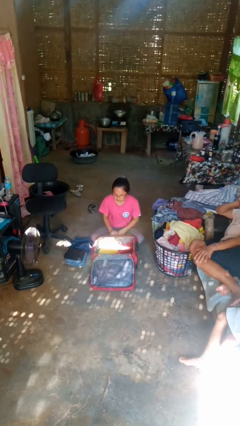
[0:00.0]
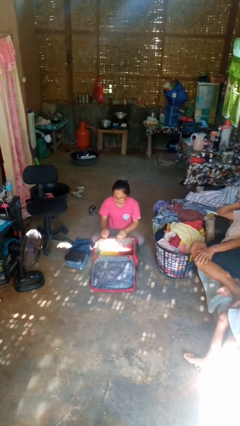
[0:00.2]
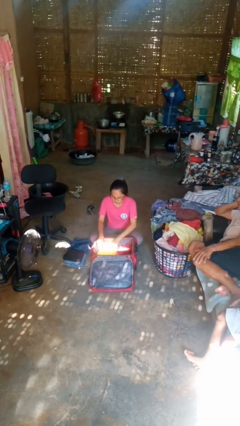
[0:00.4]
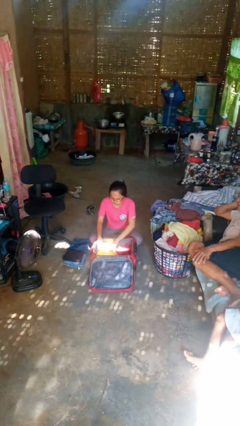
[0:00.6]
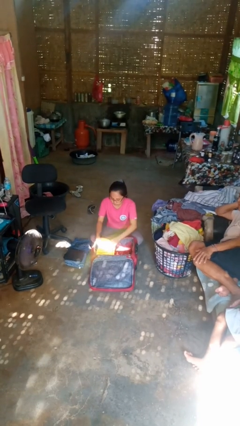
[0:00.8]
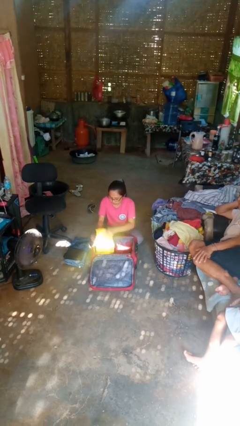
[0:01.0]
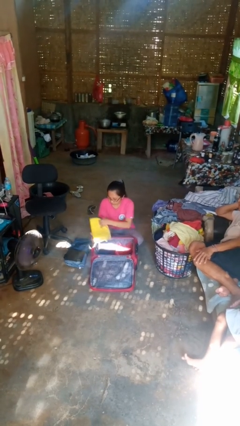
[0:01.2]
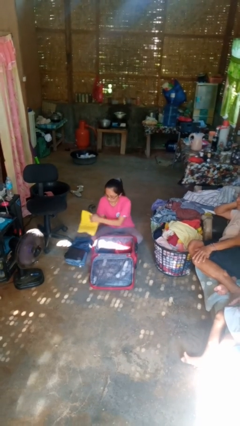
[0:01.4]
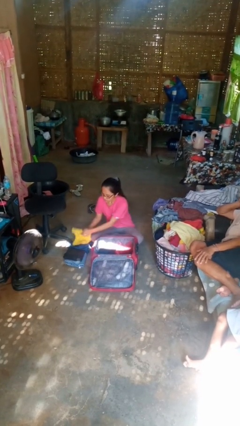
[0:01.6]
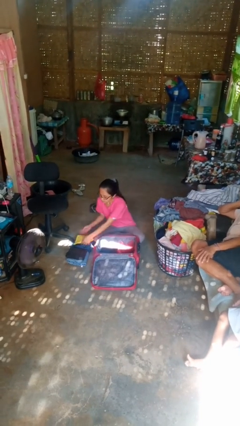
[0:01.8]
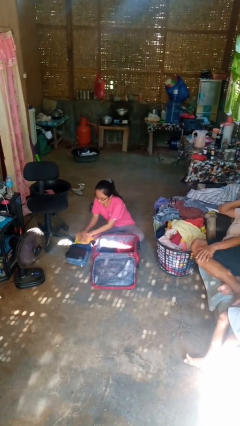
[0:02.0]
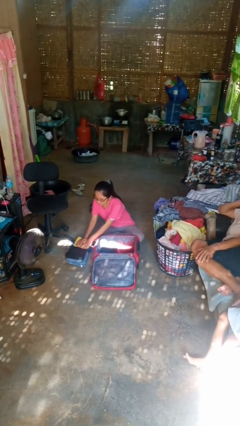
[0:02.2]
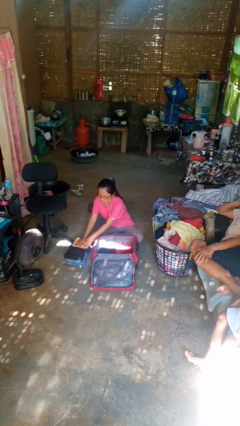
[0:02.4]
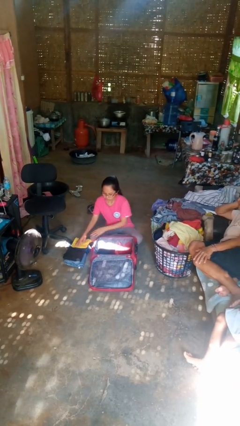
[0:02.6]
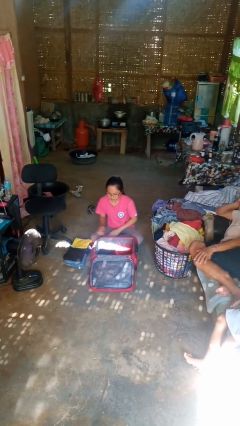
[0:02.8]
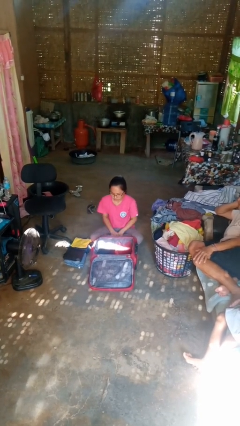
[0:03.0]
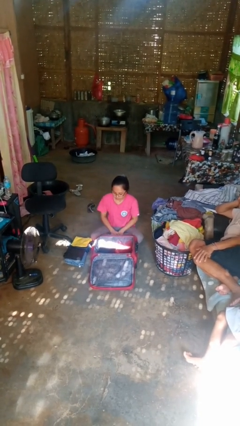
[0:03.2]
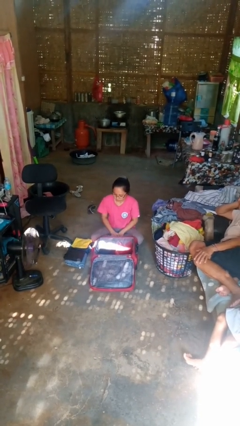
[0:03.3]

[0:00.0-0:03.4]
person unloads clothes from suitcase

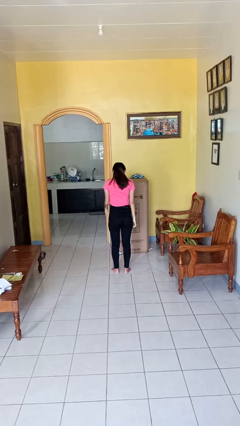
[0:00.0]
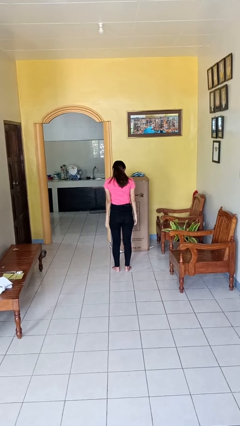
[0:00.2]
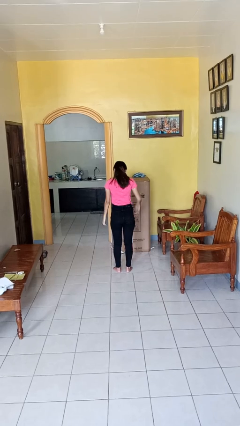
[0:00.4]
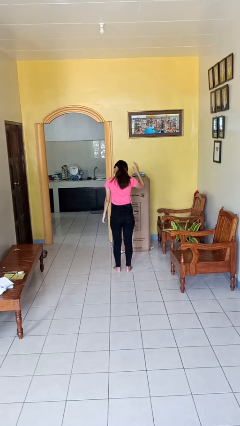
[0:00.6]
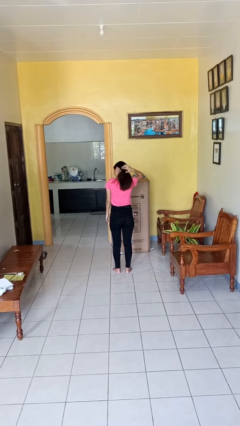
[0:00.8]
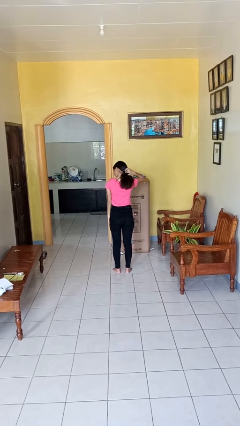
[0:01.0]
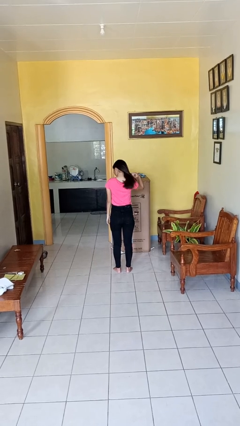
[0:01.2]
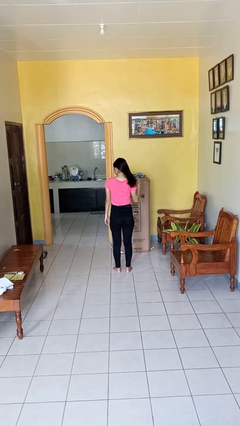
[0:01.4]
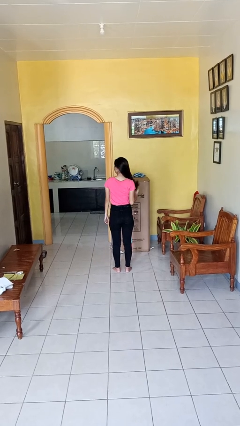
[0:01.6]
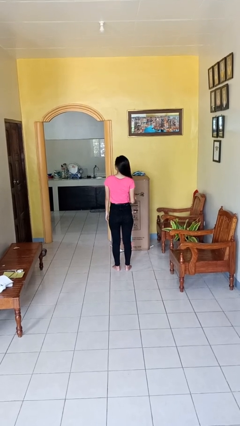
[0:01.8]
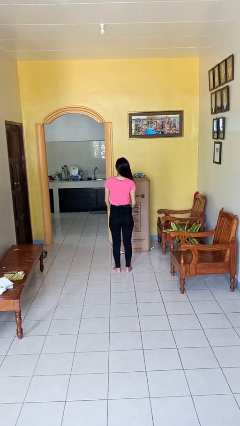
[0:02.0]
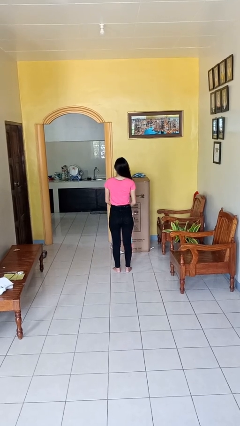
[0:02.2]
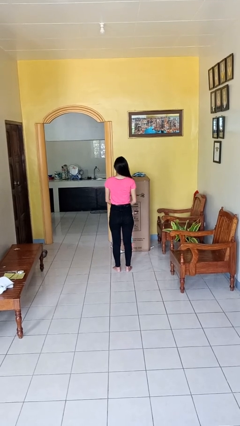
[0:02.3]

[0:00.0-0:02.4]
person takes off hairtie

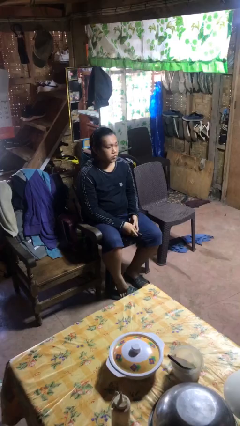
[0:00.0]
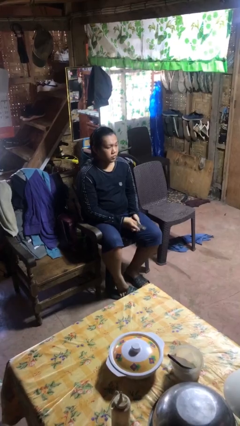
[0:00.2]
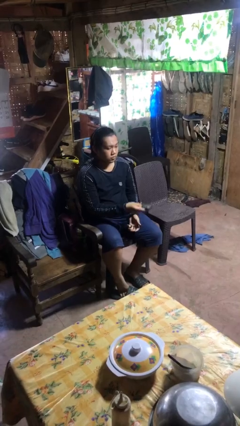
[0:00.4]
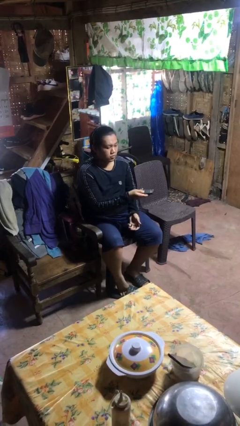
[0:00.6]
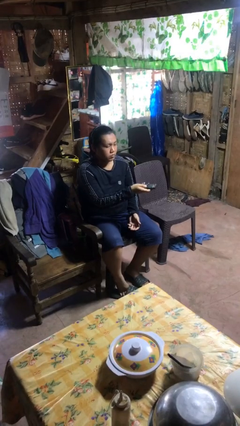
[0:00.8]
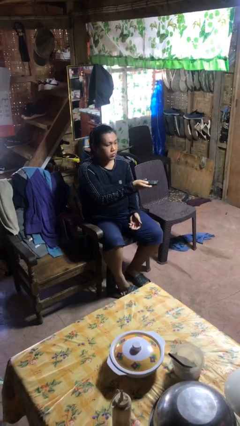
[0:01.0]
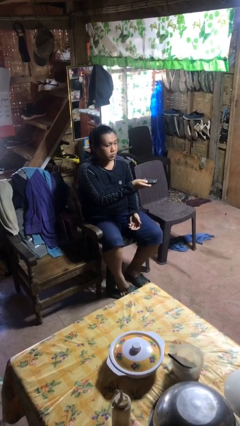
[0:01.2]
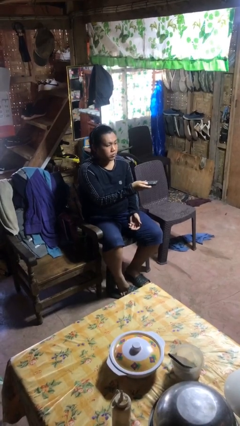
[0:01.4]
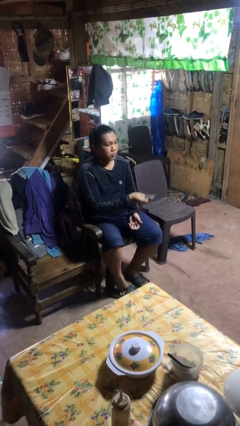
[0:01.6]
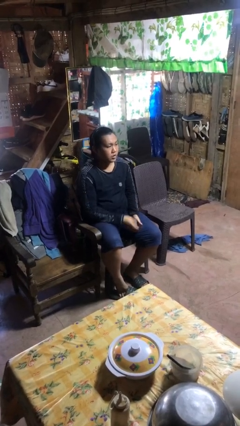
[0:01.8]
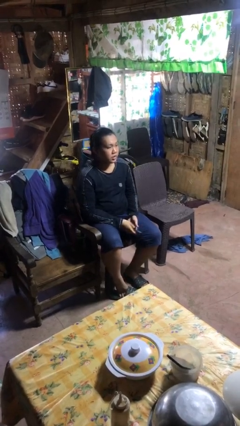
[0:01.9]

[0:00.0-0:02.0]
person uses television remote

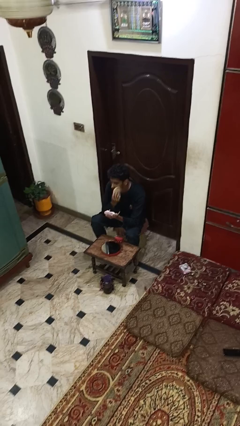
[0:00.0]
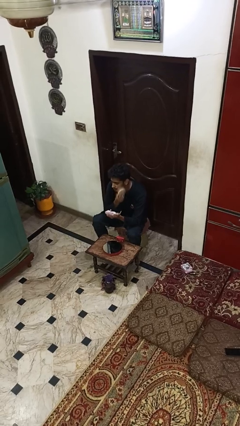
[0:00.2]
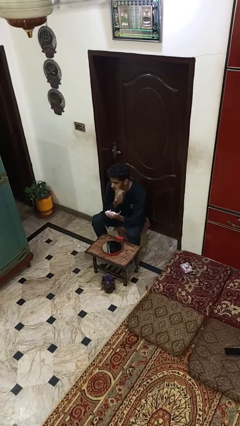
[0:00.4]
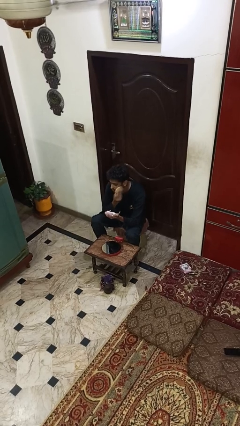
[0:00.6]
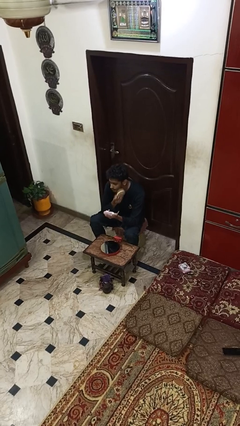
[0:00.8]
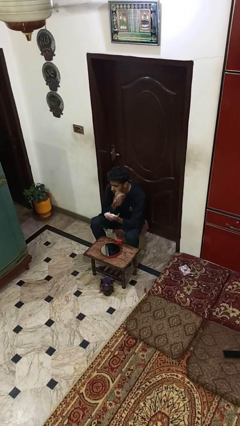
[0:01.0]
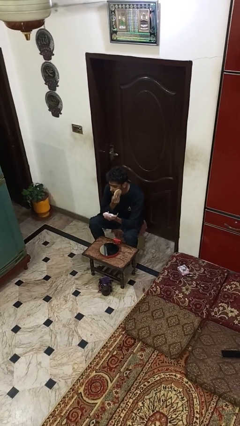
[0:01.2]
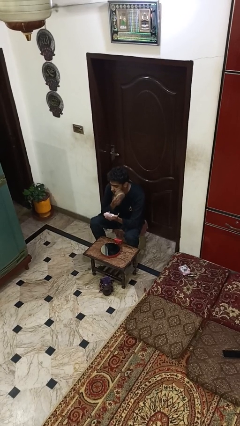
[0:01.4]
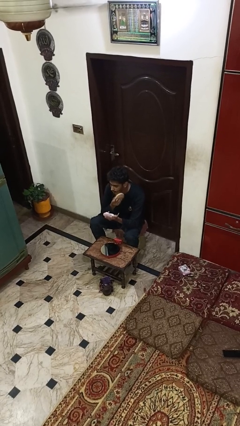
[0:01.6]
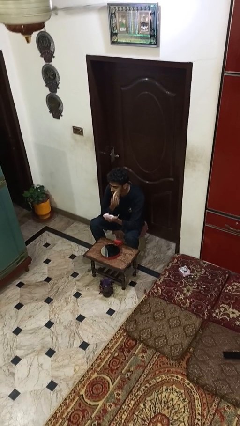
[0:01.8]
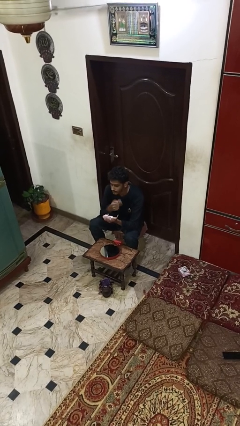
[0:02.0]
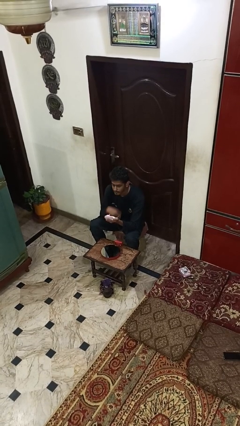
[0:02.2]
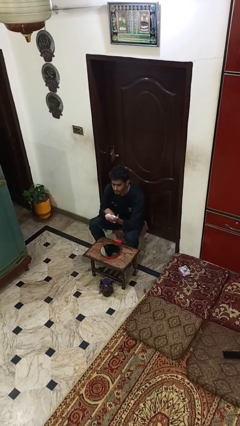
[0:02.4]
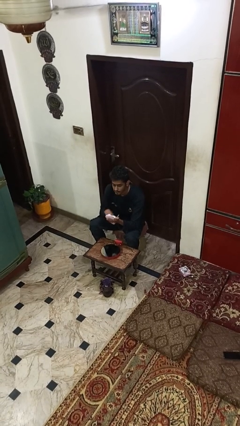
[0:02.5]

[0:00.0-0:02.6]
person applies foundation makeup

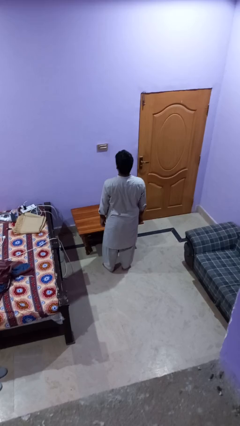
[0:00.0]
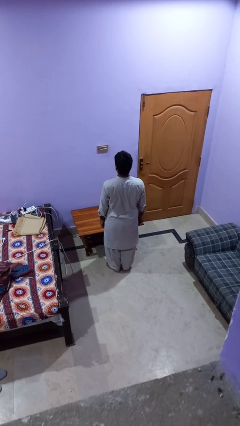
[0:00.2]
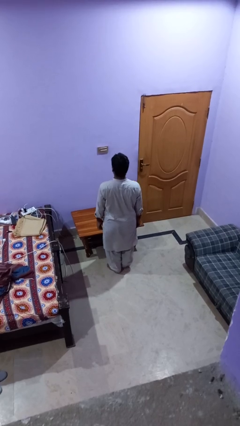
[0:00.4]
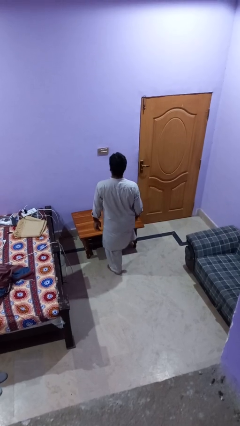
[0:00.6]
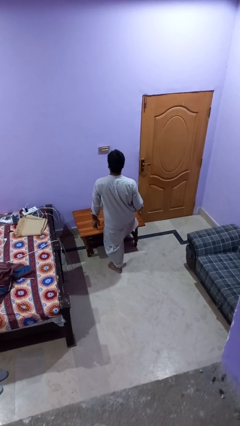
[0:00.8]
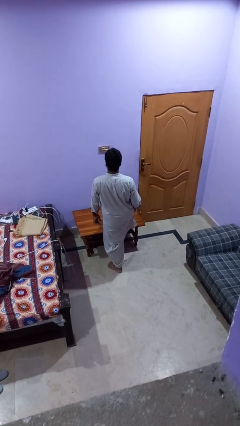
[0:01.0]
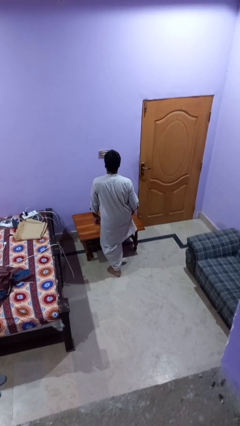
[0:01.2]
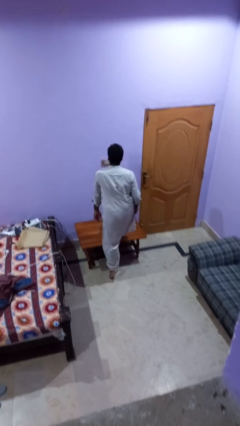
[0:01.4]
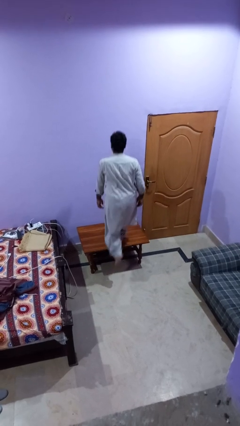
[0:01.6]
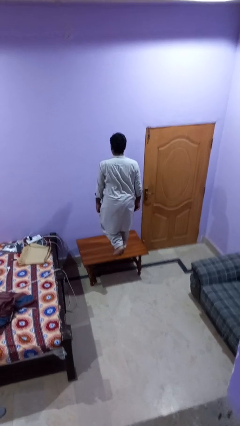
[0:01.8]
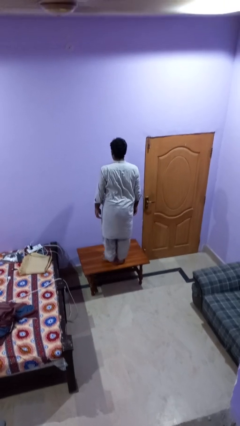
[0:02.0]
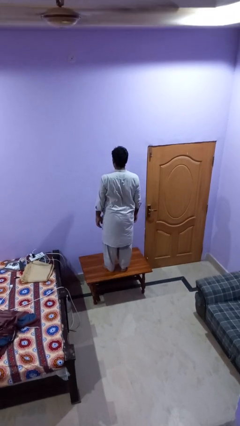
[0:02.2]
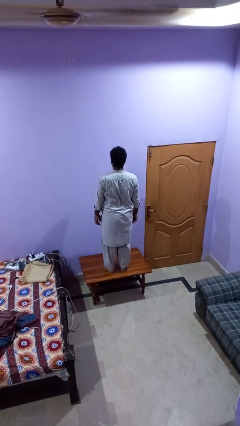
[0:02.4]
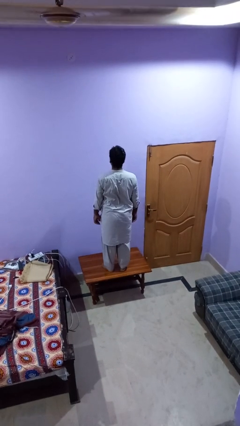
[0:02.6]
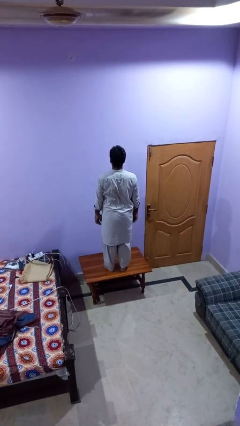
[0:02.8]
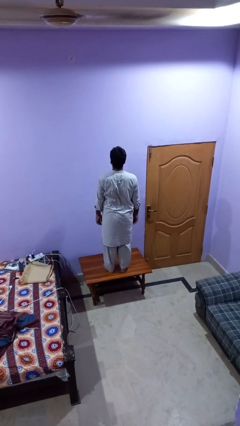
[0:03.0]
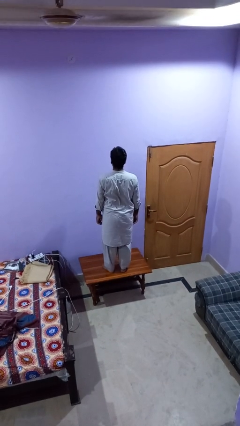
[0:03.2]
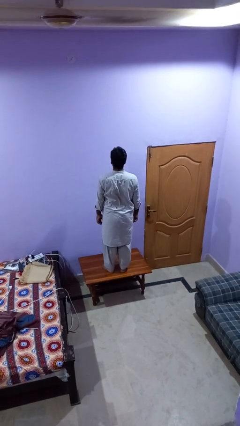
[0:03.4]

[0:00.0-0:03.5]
person climbs on table

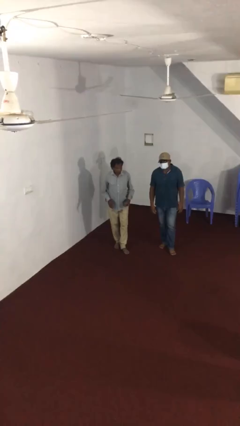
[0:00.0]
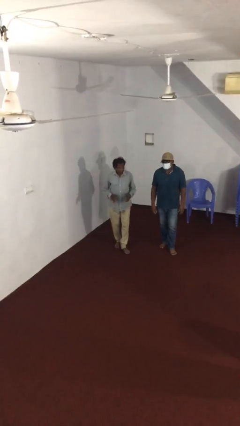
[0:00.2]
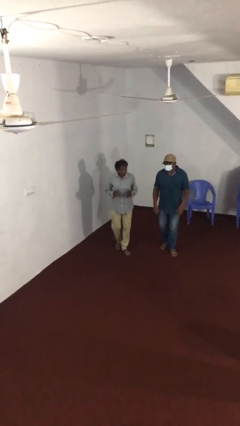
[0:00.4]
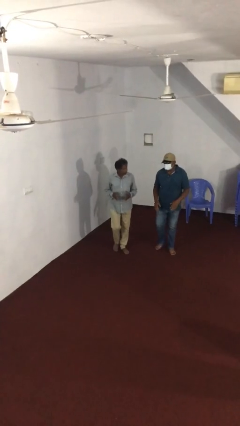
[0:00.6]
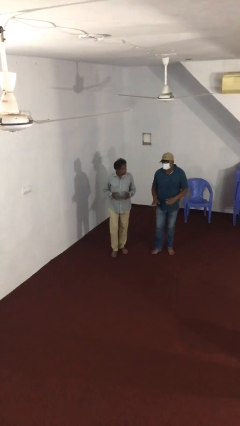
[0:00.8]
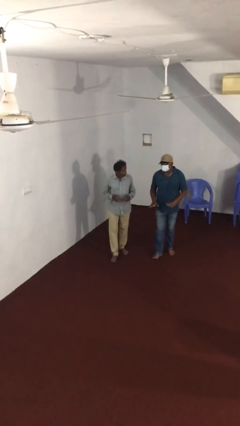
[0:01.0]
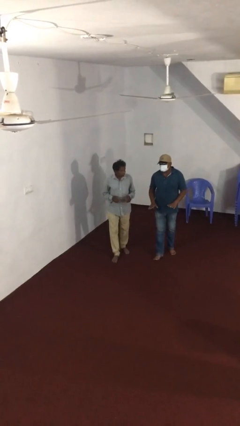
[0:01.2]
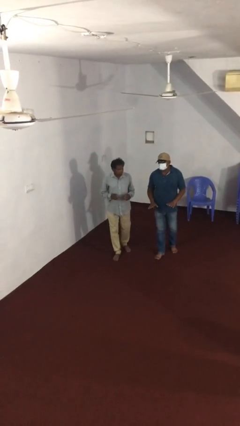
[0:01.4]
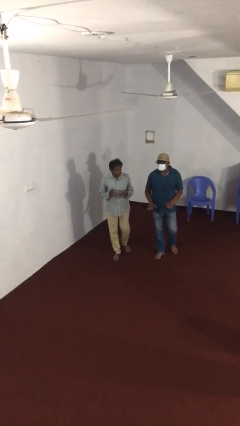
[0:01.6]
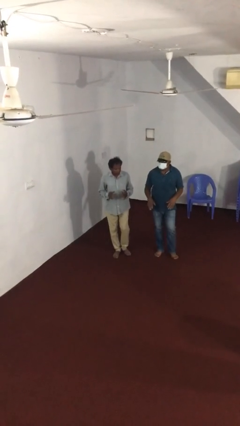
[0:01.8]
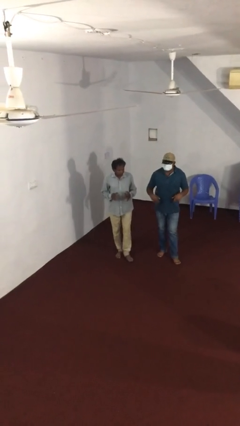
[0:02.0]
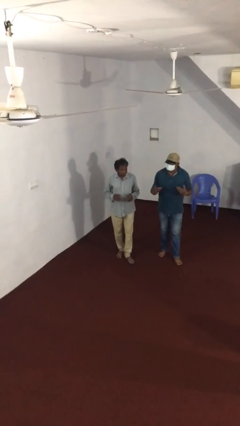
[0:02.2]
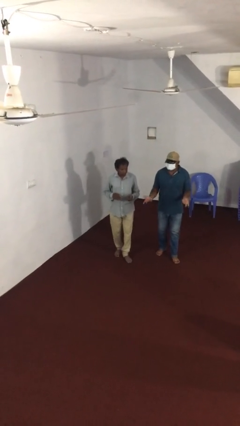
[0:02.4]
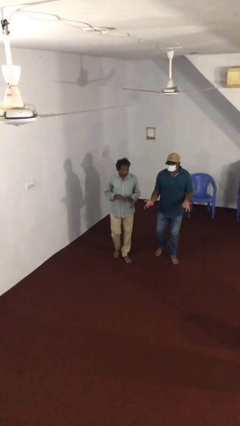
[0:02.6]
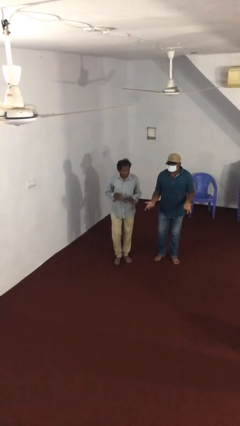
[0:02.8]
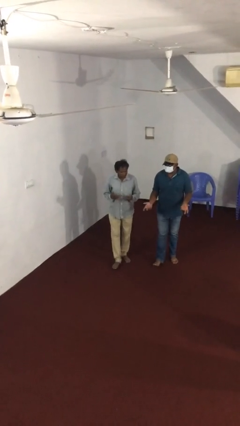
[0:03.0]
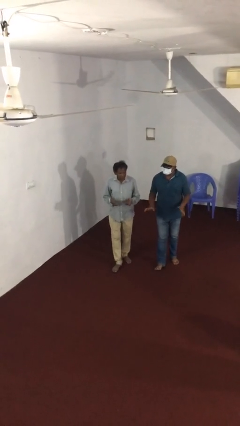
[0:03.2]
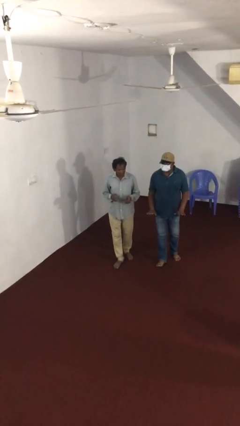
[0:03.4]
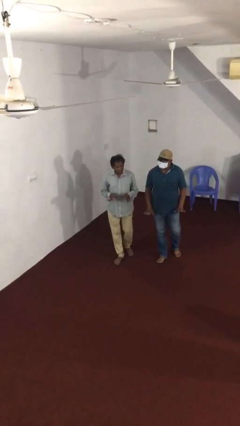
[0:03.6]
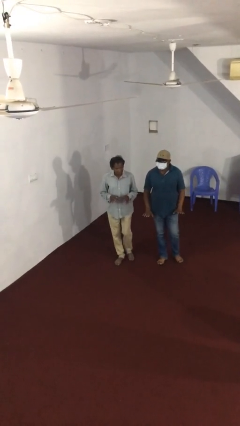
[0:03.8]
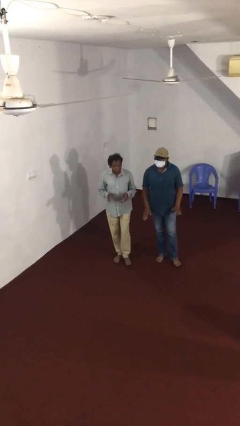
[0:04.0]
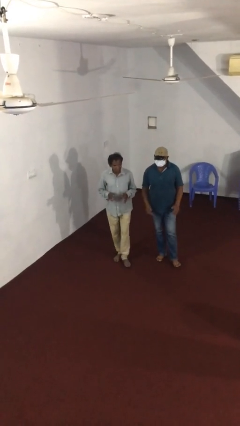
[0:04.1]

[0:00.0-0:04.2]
person talks to person
